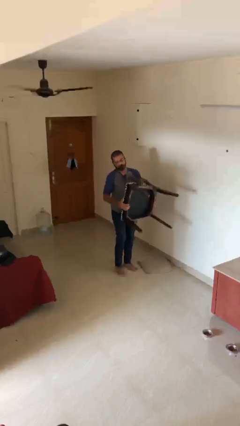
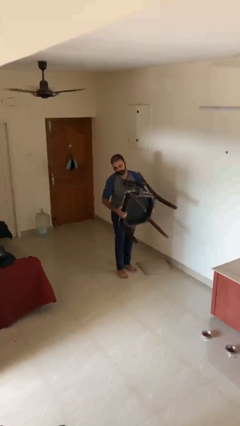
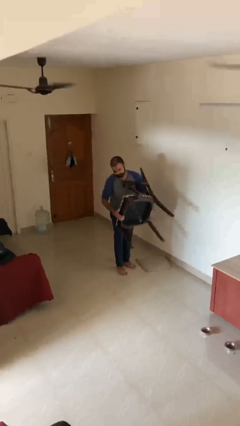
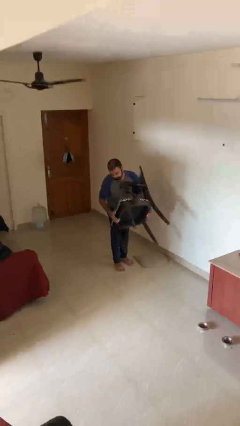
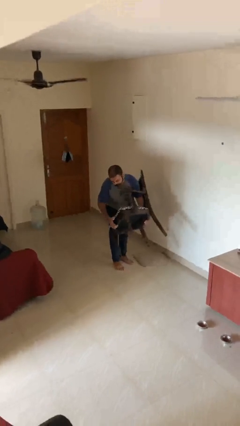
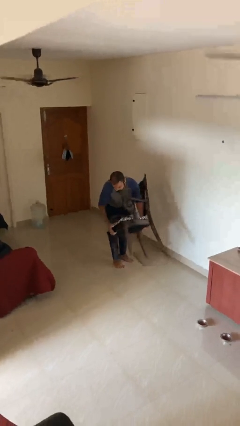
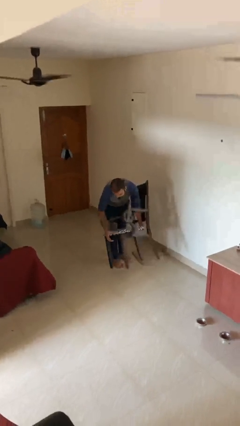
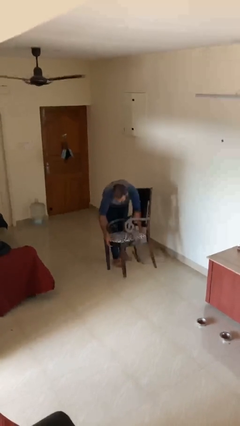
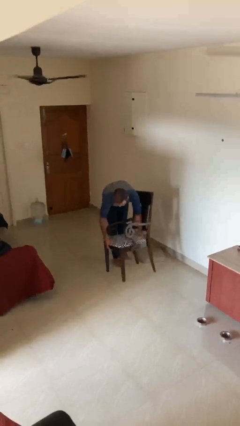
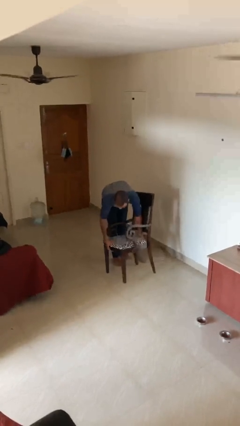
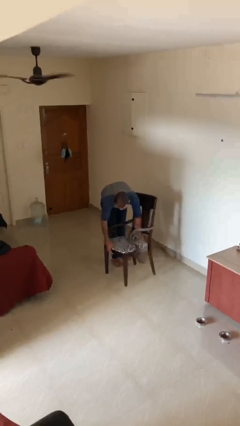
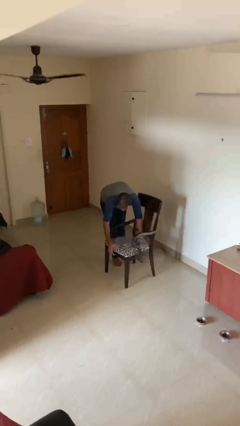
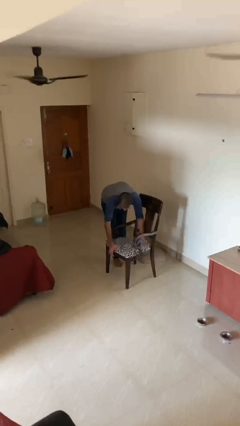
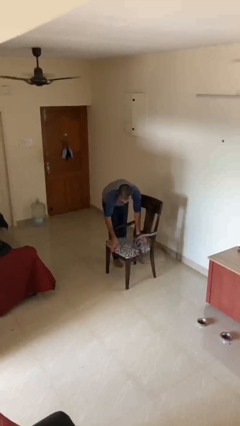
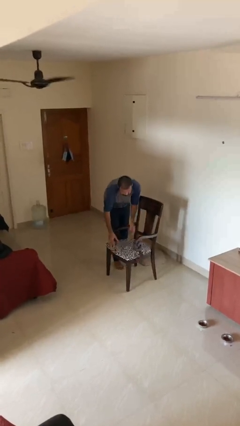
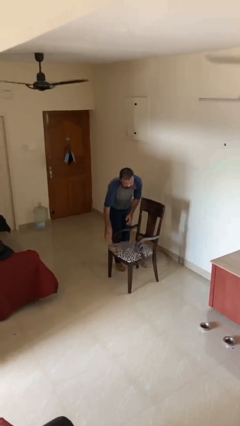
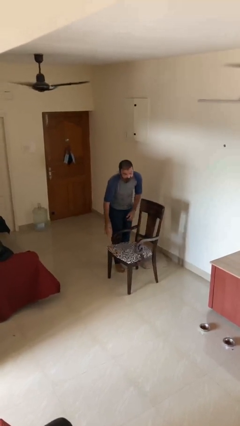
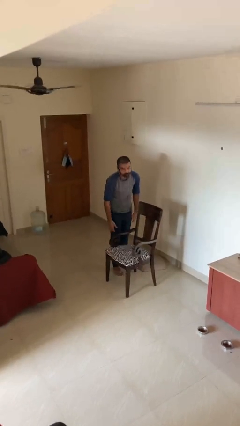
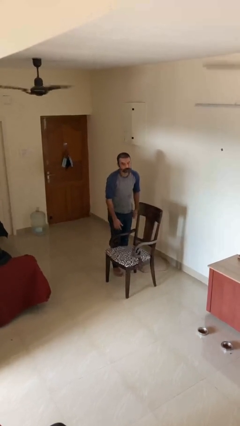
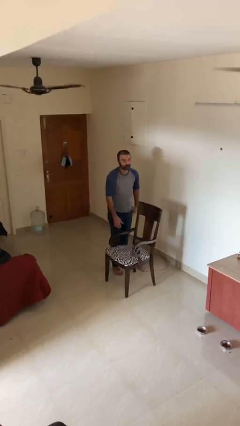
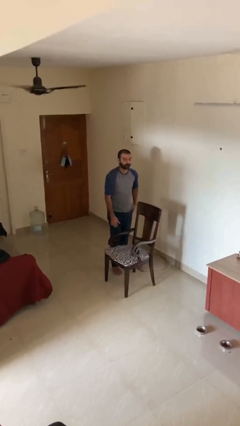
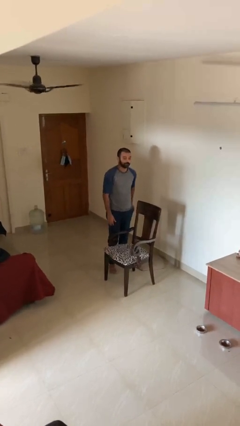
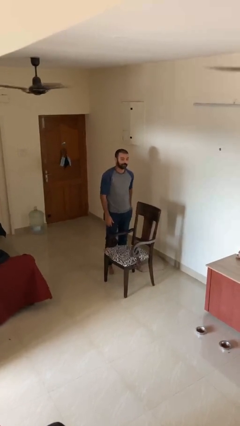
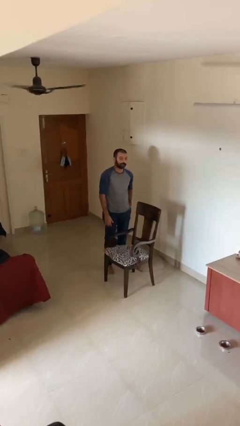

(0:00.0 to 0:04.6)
person puts down object on floor

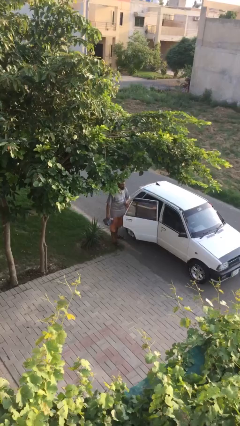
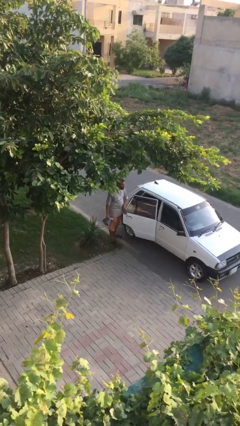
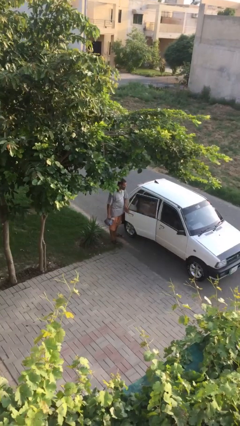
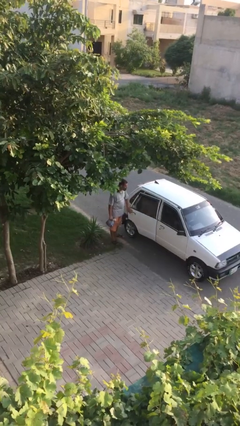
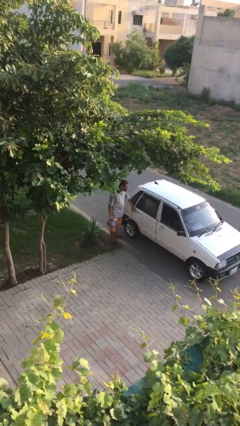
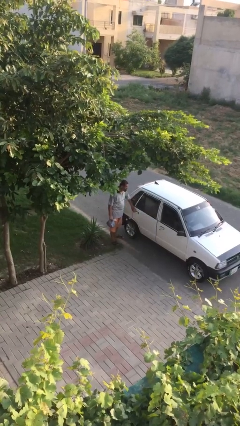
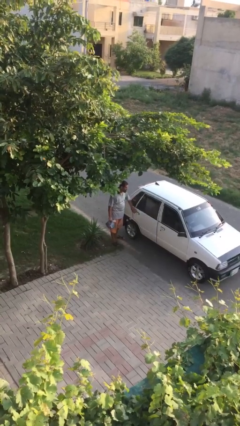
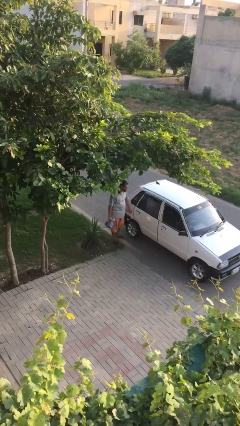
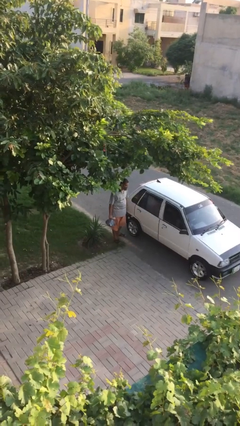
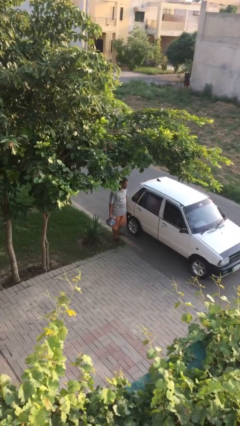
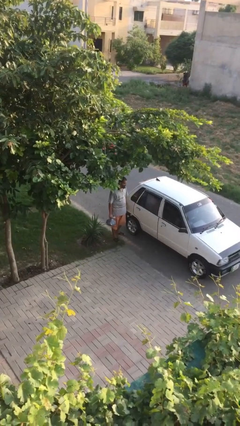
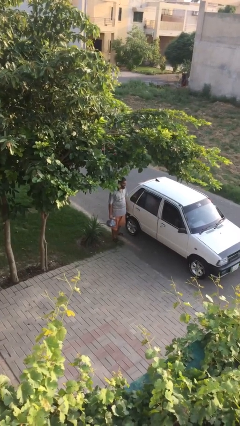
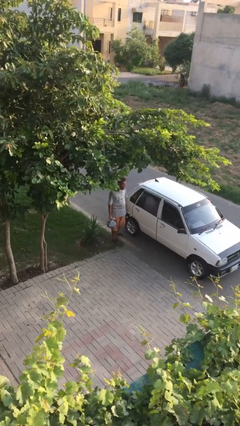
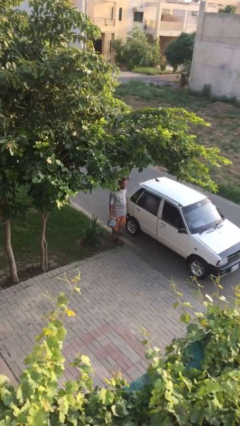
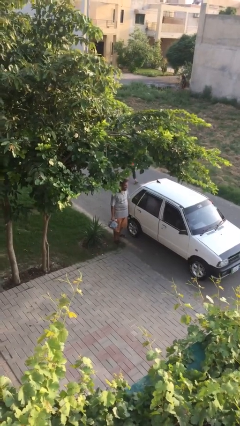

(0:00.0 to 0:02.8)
person closes car door

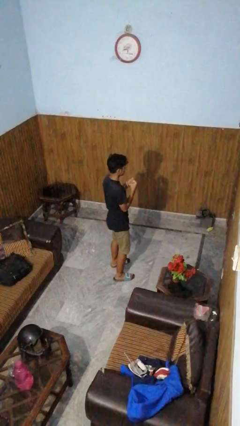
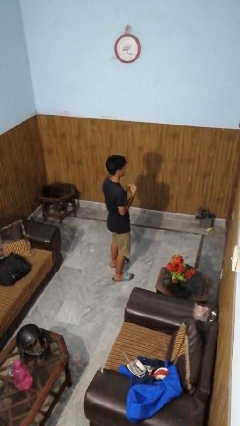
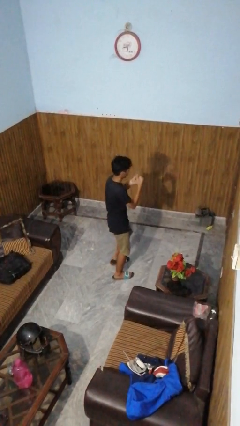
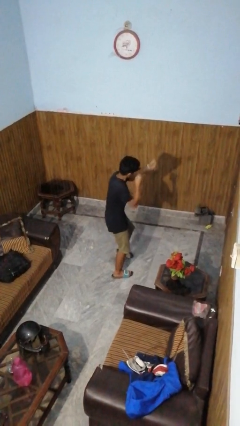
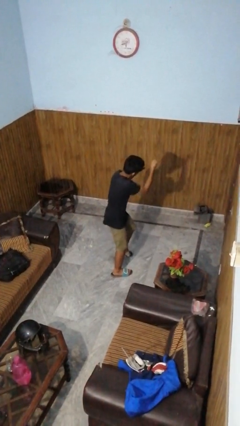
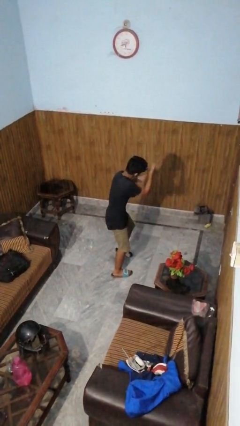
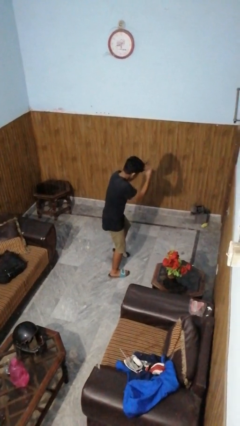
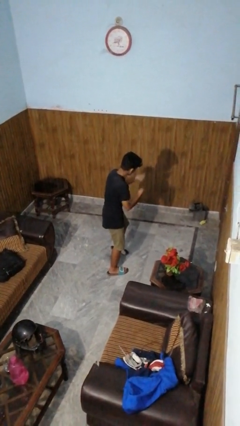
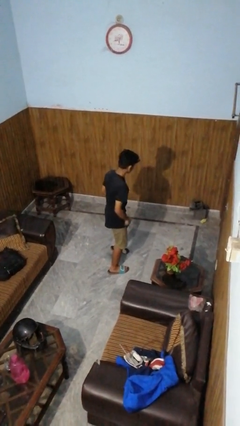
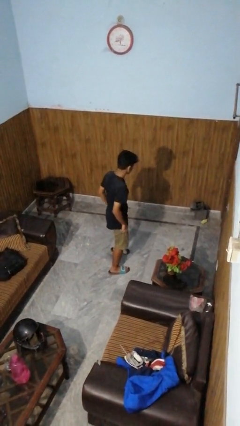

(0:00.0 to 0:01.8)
person punches

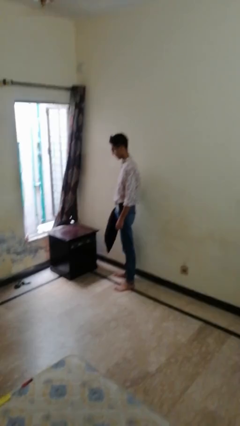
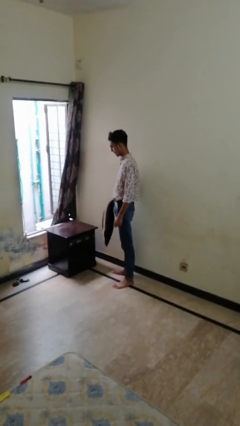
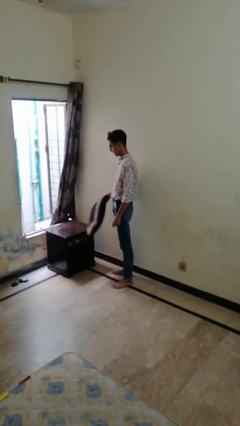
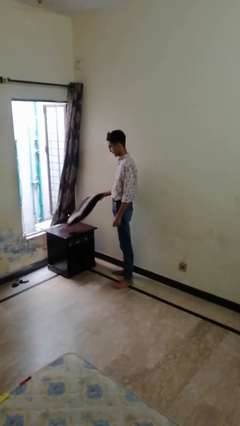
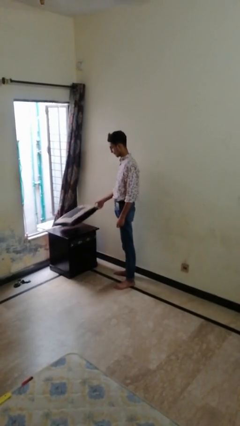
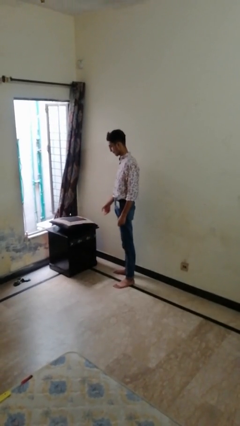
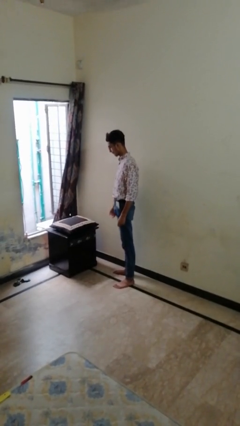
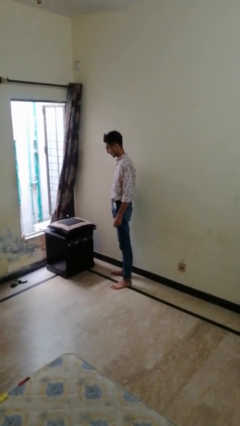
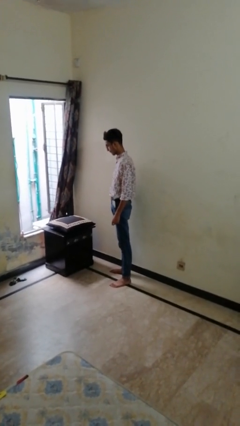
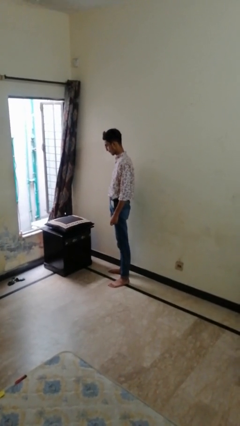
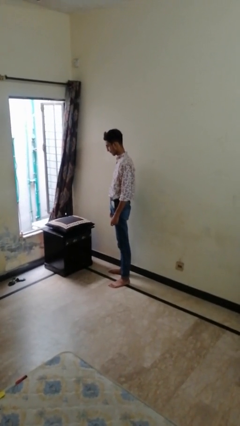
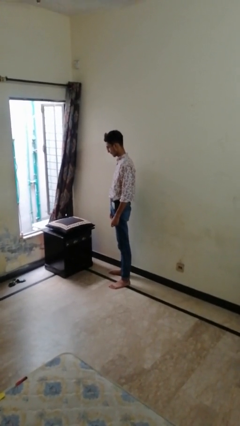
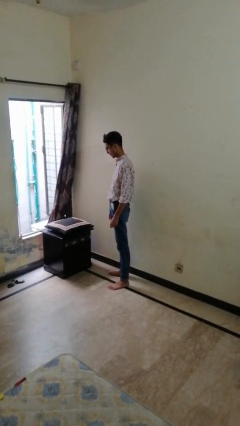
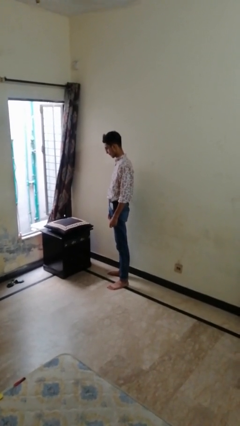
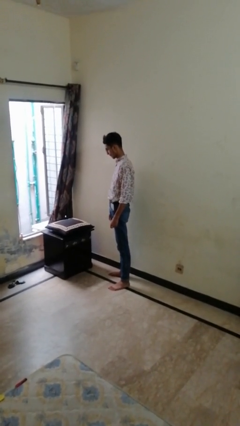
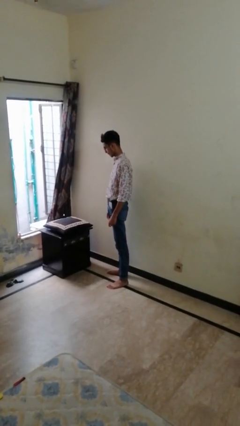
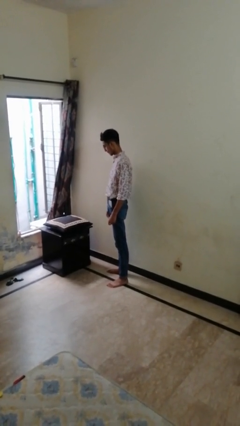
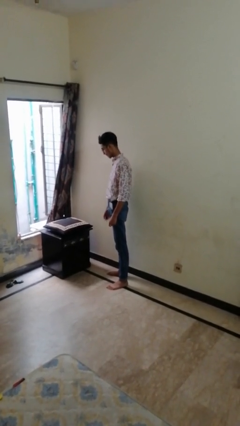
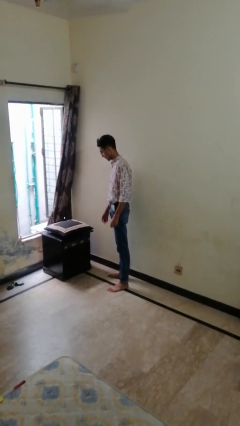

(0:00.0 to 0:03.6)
person throws object on table

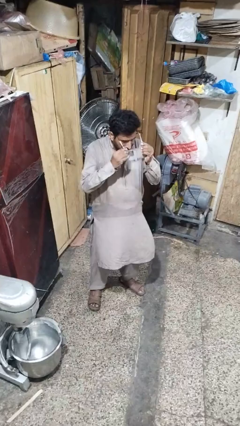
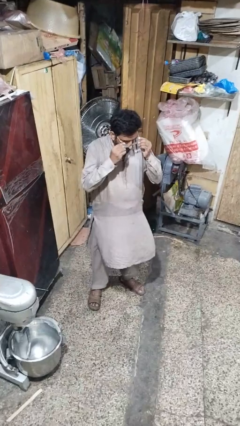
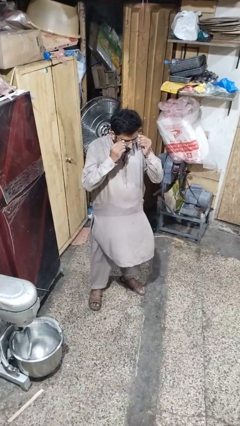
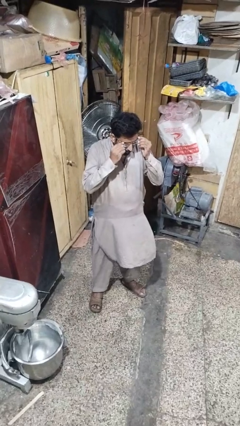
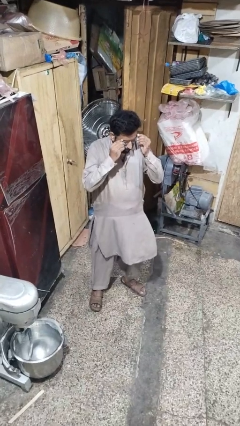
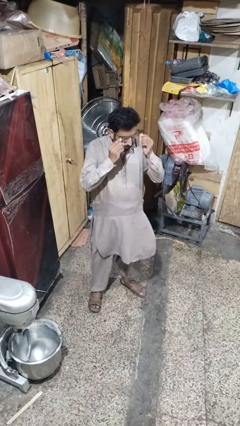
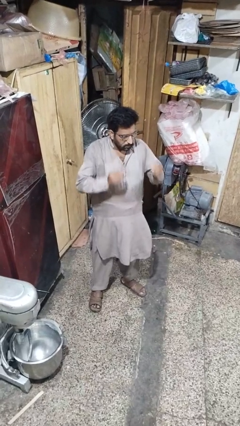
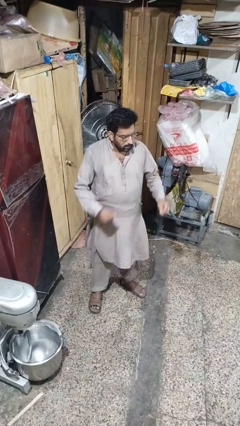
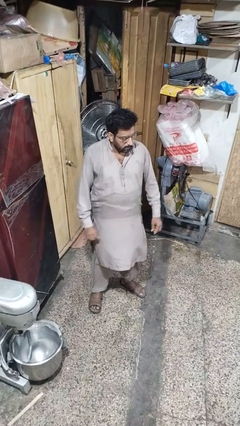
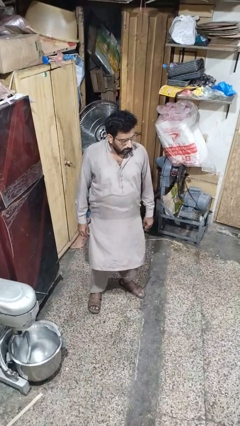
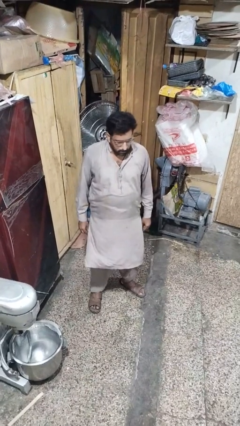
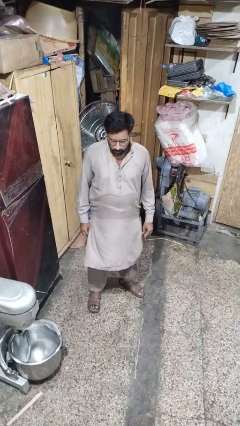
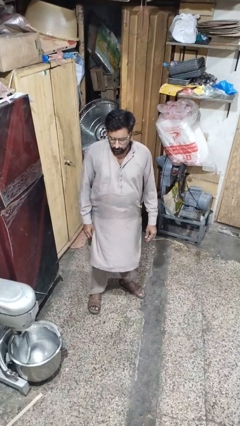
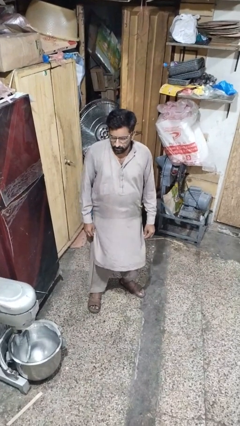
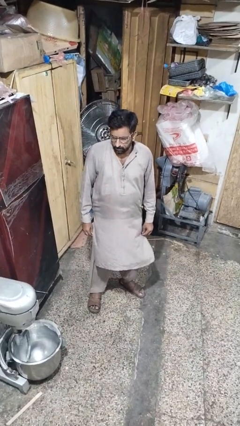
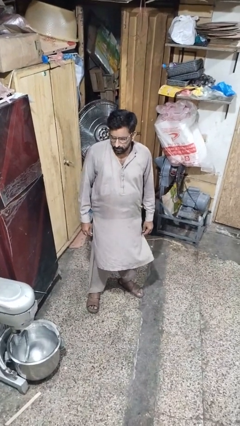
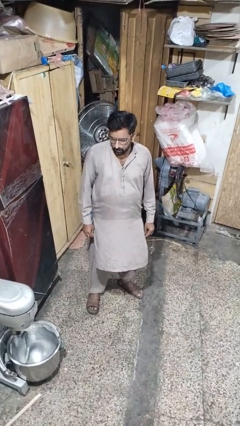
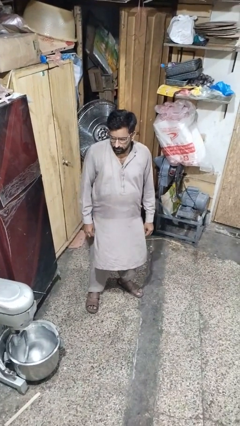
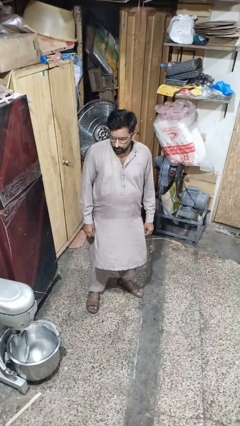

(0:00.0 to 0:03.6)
person puts on glasses

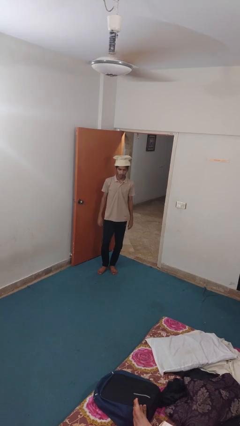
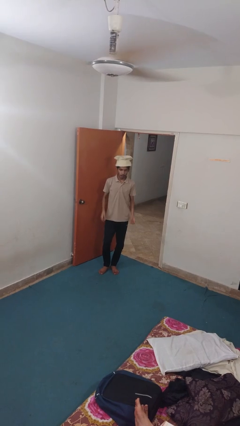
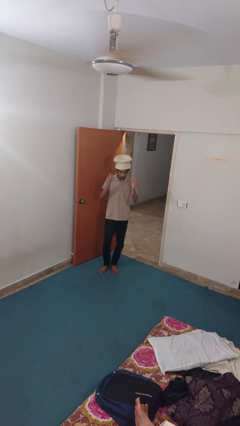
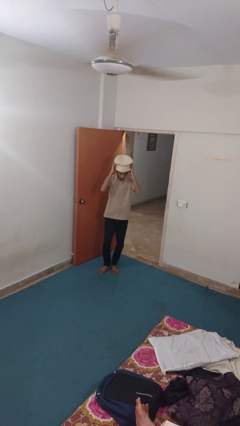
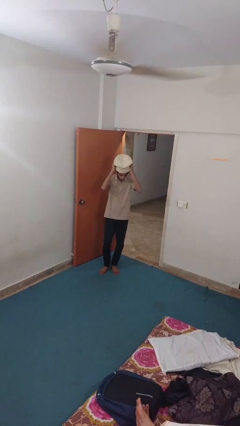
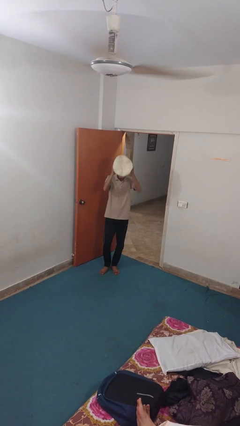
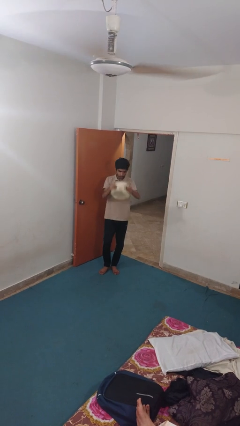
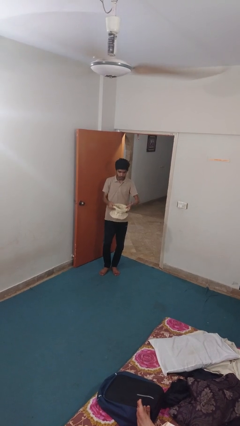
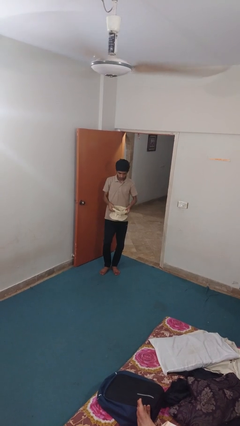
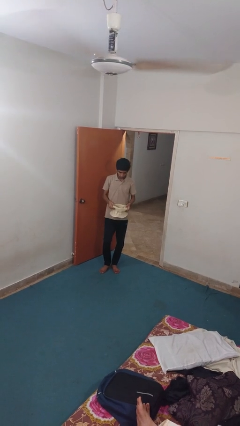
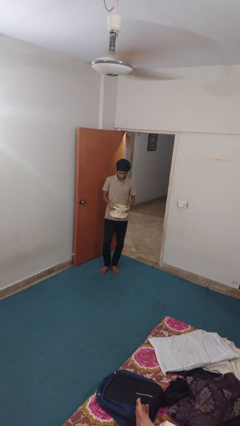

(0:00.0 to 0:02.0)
person takes off hat
